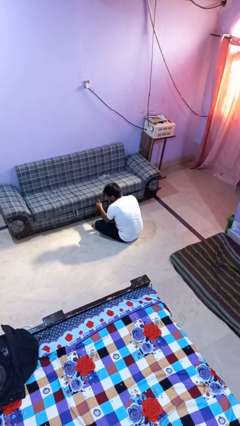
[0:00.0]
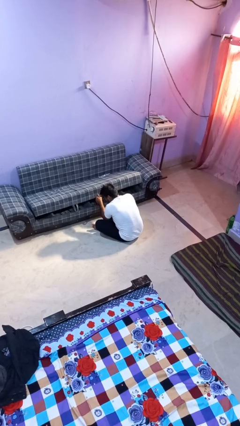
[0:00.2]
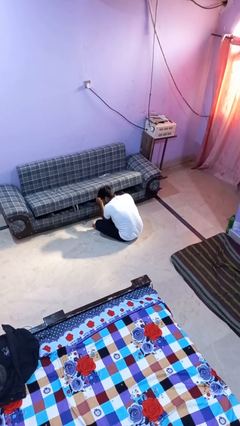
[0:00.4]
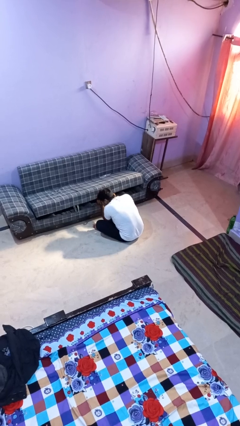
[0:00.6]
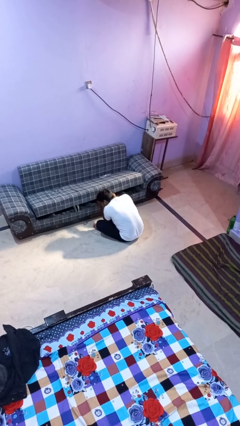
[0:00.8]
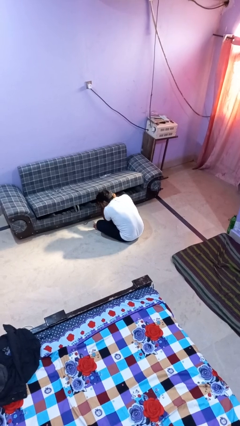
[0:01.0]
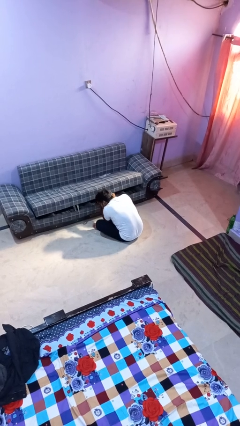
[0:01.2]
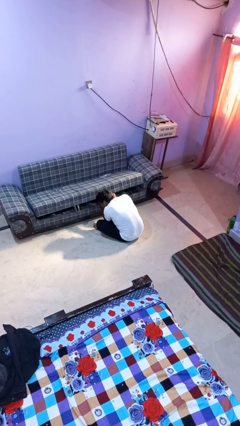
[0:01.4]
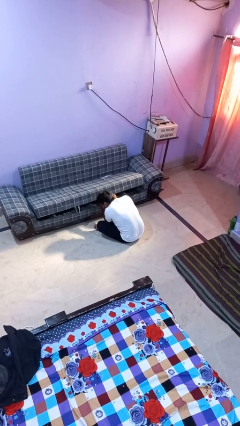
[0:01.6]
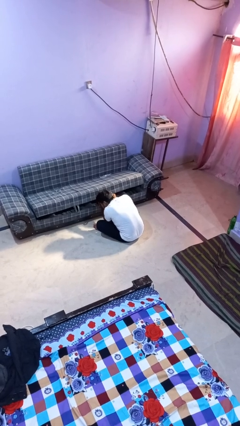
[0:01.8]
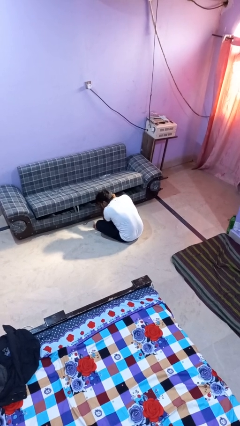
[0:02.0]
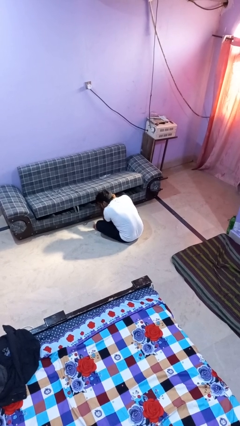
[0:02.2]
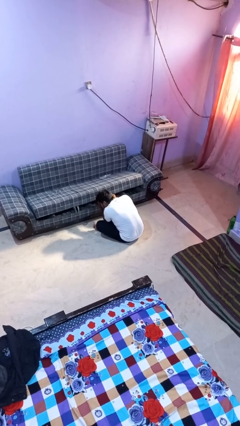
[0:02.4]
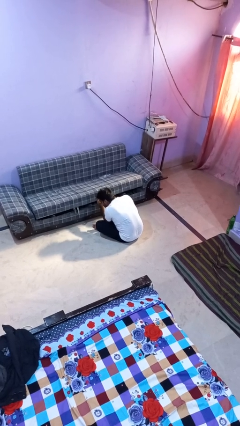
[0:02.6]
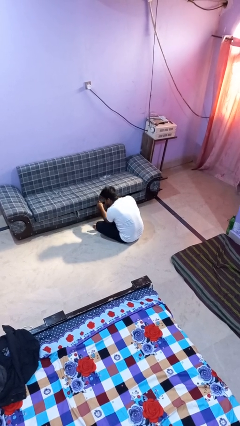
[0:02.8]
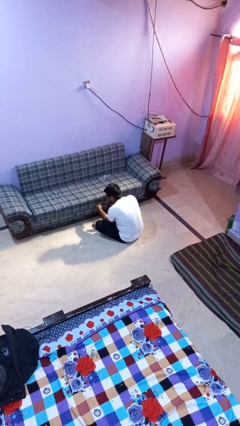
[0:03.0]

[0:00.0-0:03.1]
person searches under couch

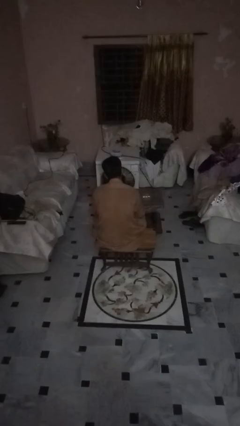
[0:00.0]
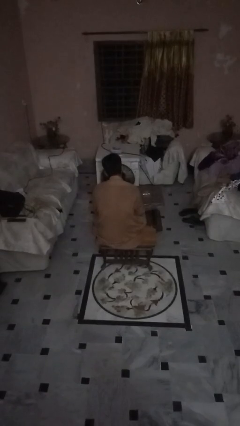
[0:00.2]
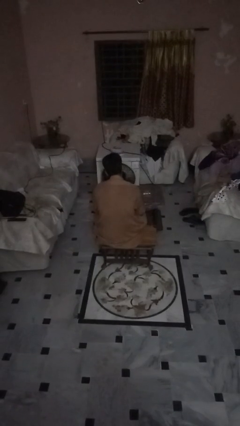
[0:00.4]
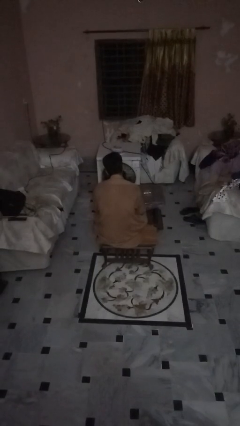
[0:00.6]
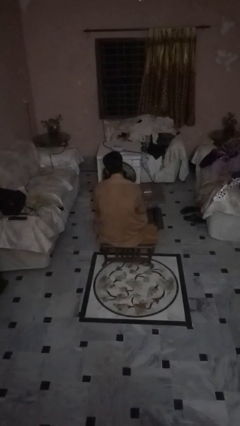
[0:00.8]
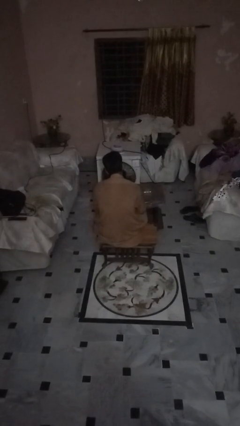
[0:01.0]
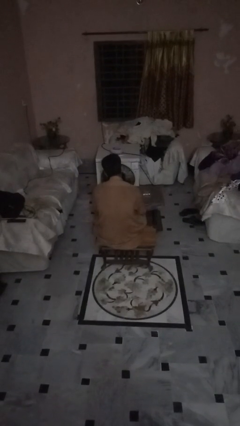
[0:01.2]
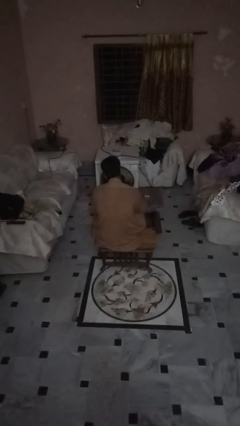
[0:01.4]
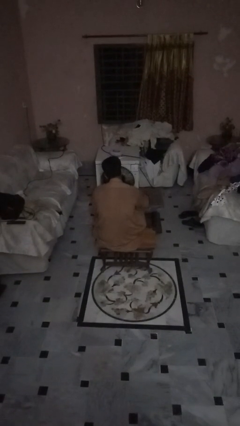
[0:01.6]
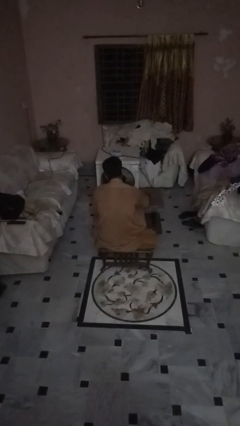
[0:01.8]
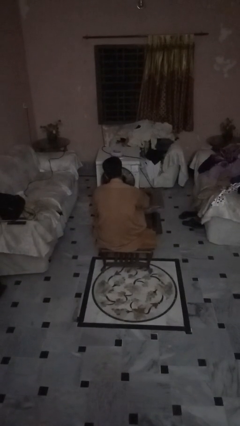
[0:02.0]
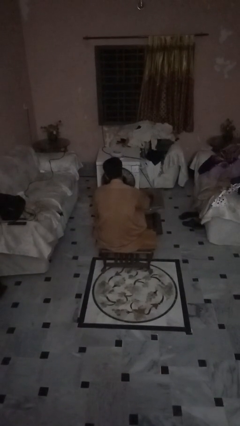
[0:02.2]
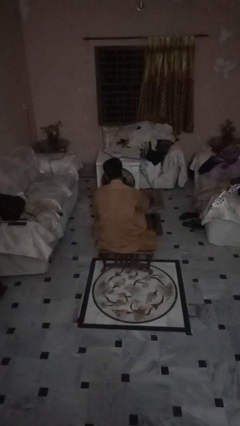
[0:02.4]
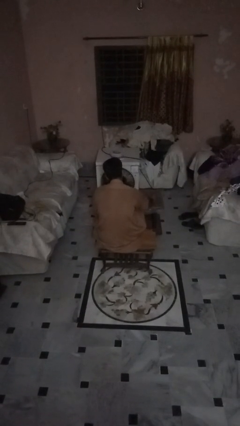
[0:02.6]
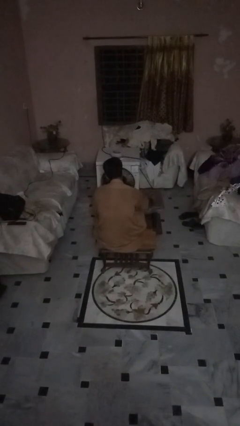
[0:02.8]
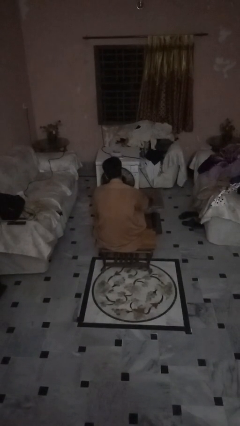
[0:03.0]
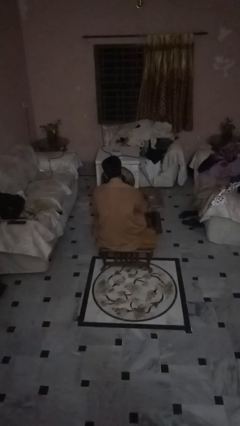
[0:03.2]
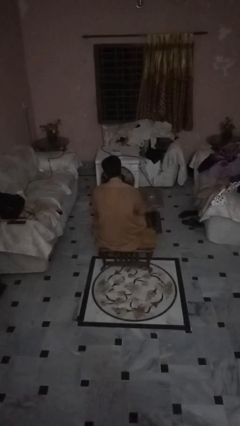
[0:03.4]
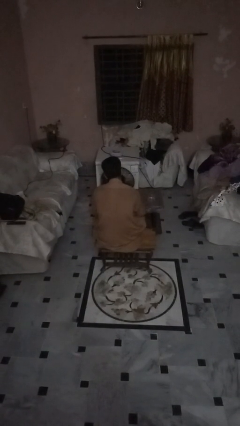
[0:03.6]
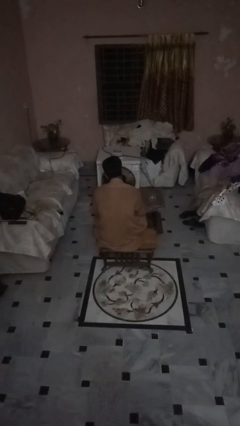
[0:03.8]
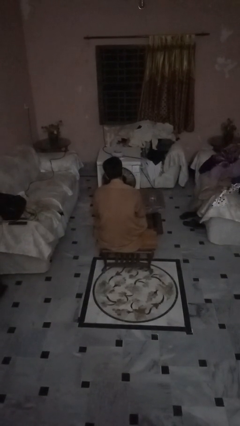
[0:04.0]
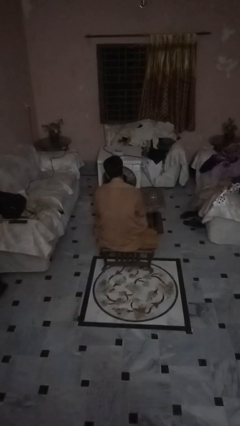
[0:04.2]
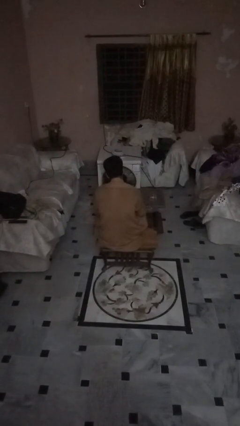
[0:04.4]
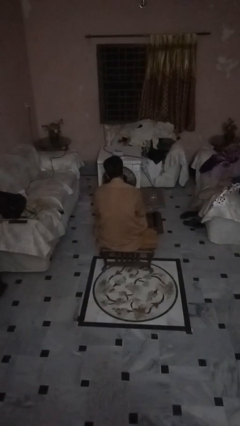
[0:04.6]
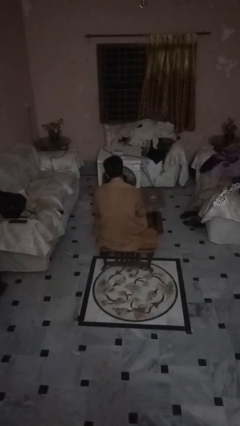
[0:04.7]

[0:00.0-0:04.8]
person sets upright glass

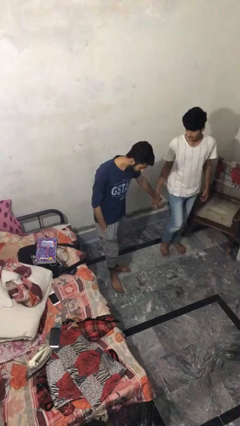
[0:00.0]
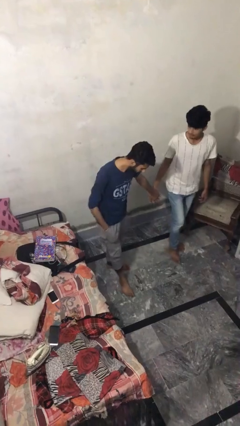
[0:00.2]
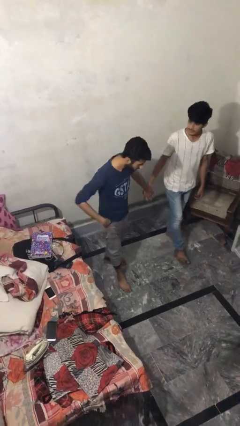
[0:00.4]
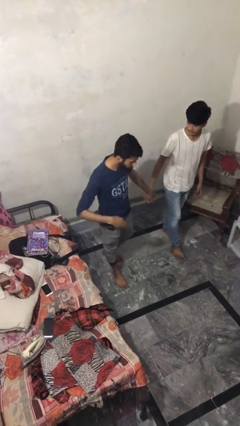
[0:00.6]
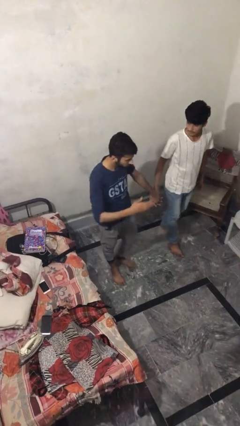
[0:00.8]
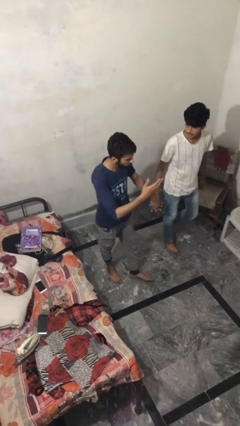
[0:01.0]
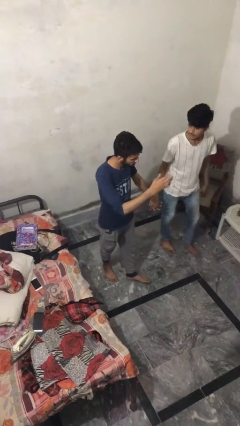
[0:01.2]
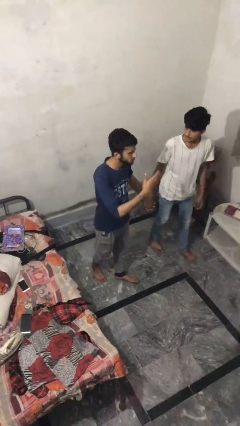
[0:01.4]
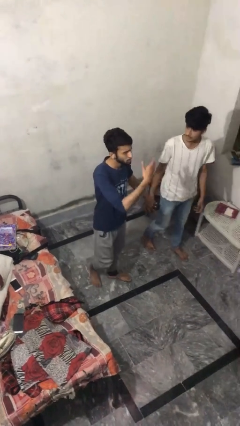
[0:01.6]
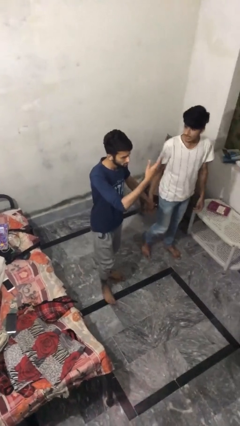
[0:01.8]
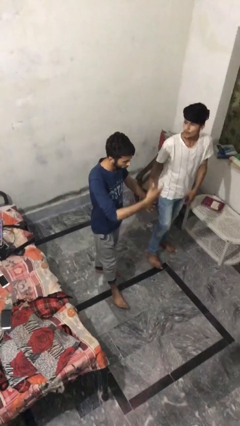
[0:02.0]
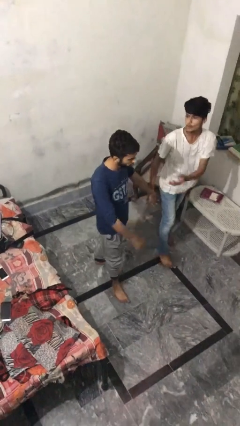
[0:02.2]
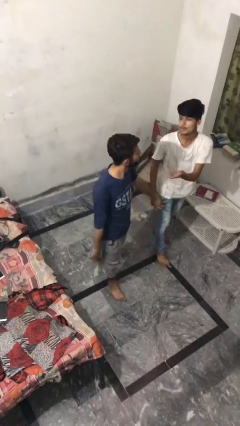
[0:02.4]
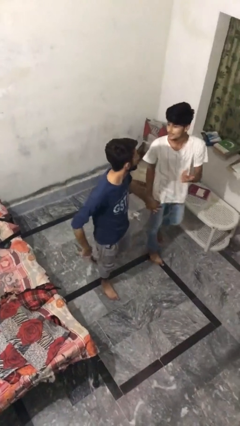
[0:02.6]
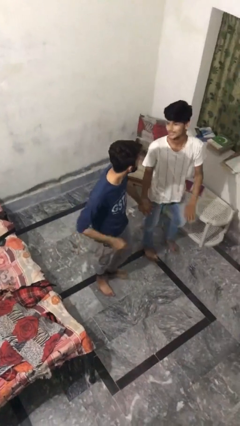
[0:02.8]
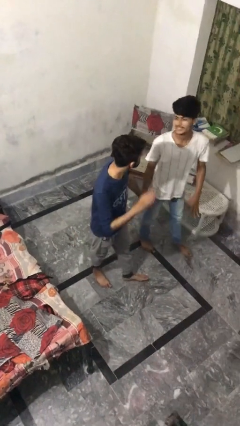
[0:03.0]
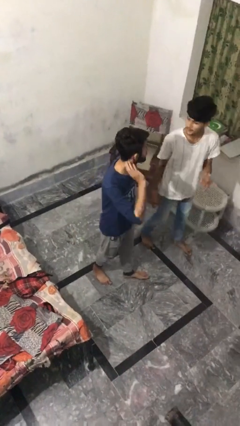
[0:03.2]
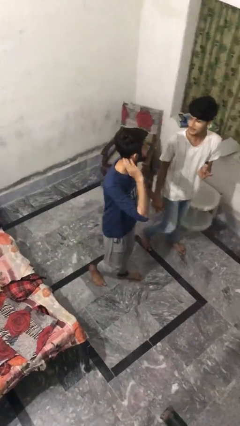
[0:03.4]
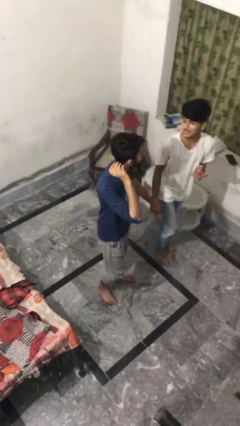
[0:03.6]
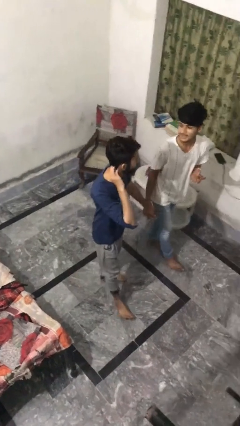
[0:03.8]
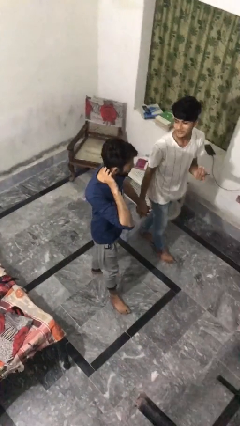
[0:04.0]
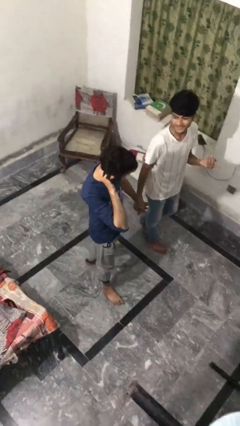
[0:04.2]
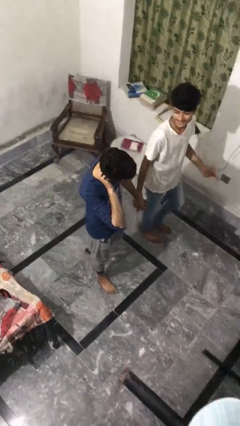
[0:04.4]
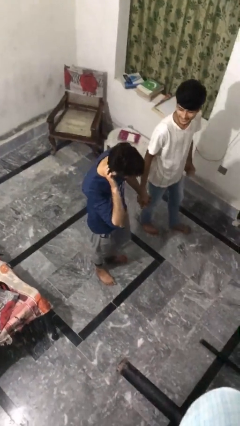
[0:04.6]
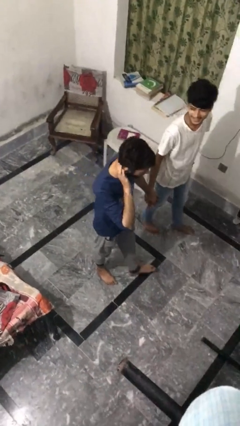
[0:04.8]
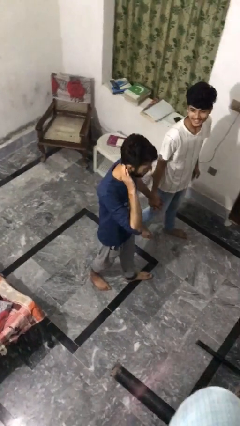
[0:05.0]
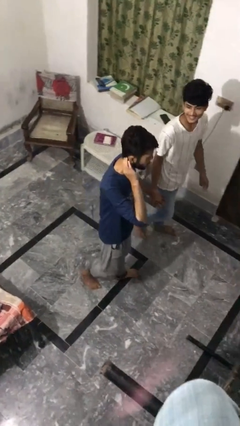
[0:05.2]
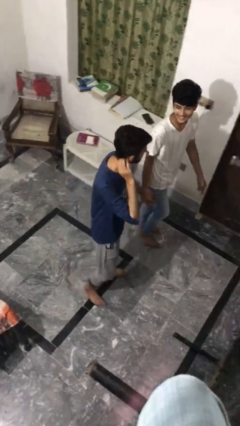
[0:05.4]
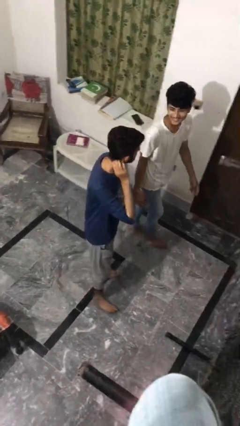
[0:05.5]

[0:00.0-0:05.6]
person holds hand

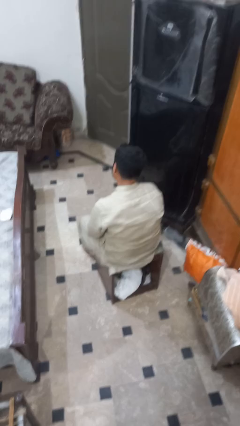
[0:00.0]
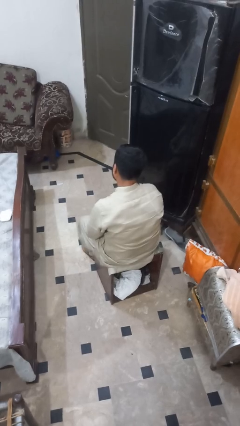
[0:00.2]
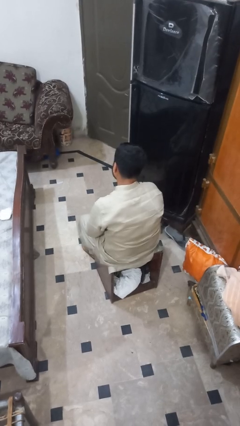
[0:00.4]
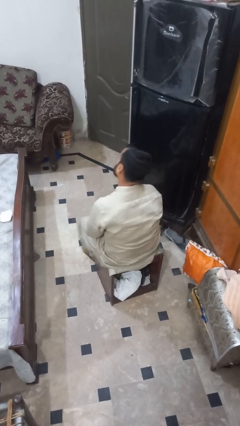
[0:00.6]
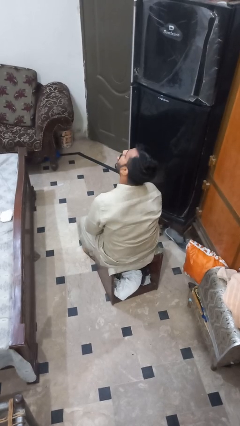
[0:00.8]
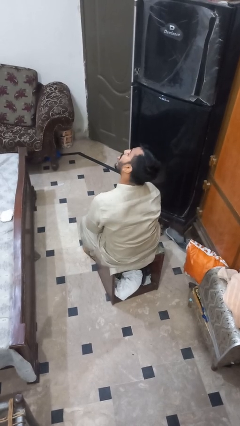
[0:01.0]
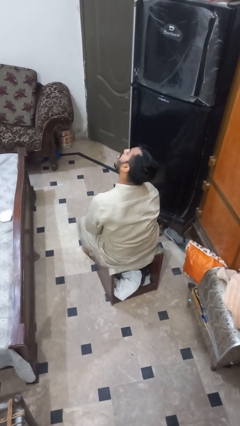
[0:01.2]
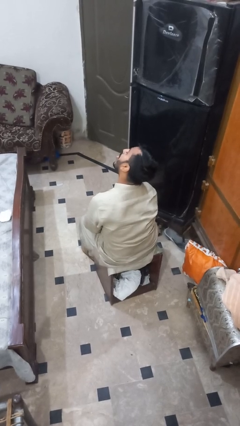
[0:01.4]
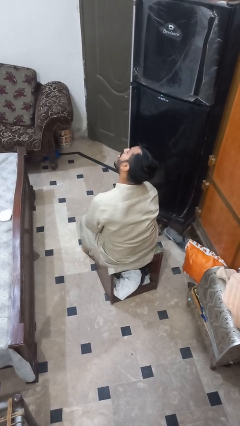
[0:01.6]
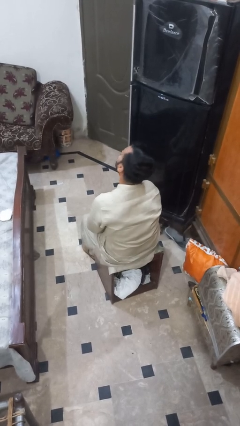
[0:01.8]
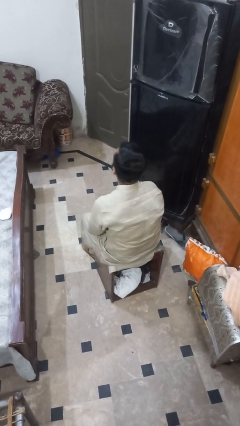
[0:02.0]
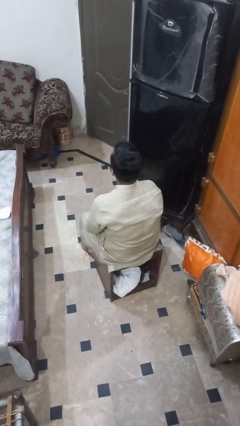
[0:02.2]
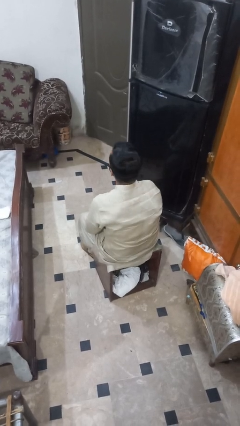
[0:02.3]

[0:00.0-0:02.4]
person sticks out tongue

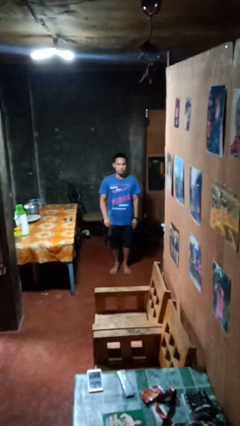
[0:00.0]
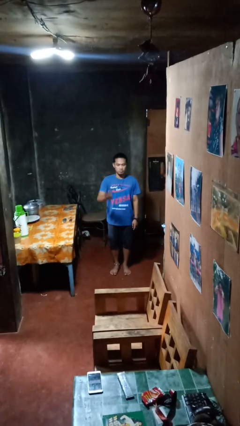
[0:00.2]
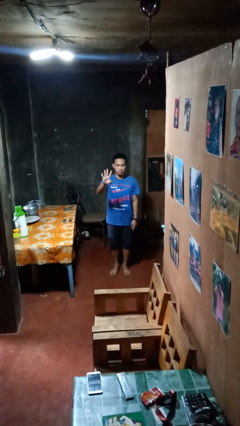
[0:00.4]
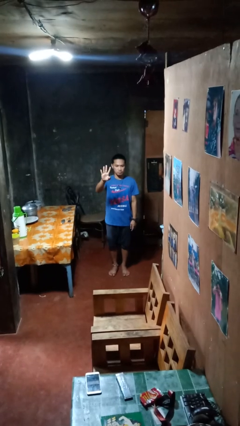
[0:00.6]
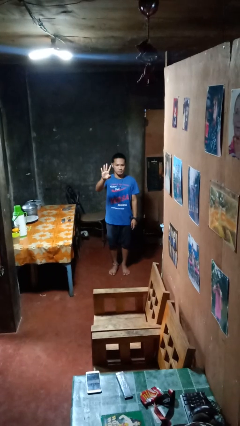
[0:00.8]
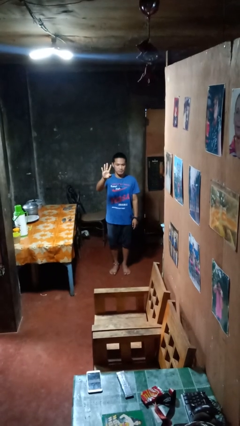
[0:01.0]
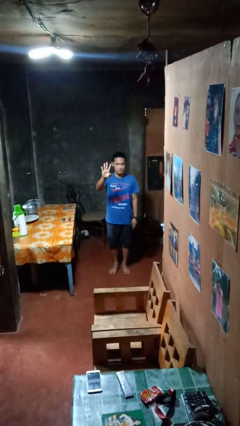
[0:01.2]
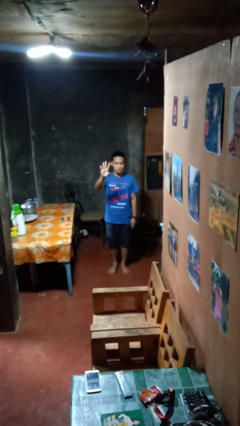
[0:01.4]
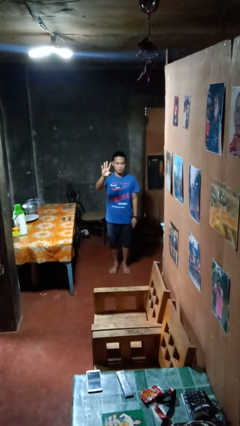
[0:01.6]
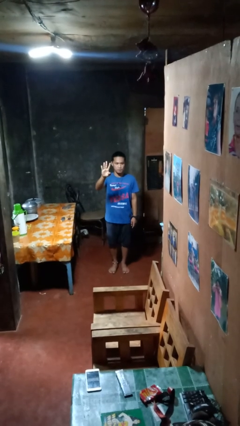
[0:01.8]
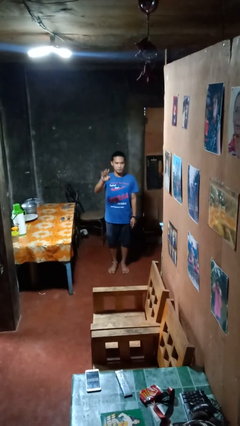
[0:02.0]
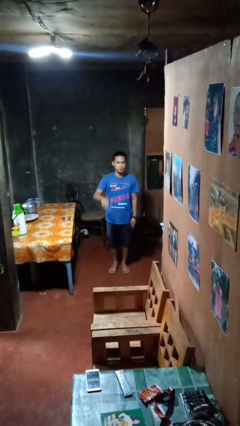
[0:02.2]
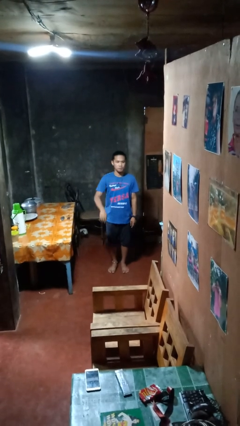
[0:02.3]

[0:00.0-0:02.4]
person gestures number four
